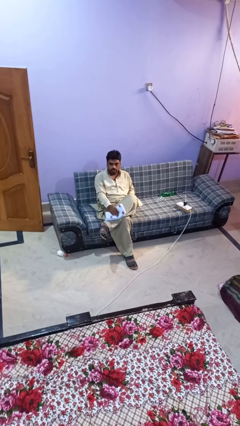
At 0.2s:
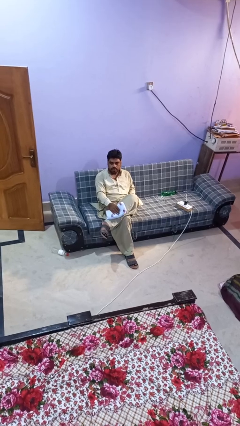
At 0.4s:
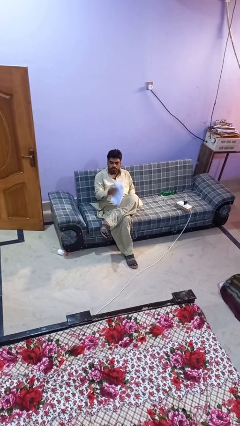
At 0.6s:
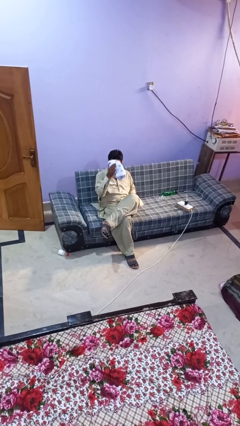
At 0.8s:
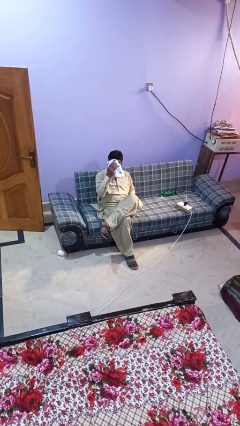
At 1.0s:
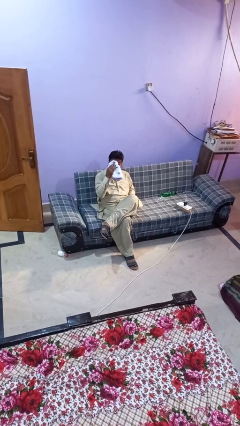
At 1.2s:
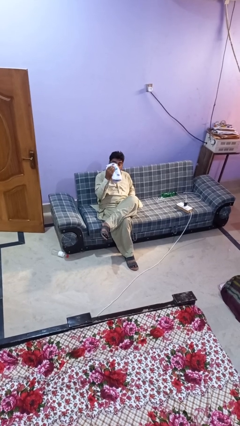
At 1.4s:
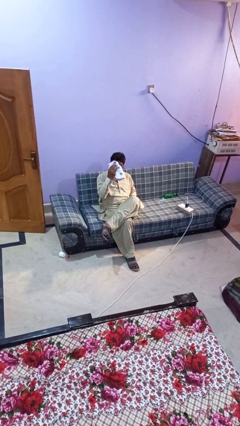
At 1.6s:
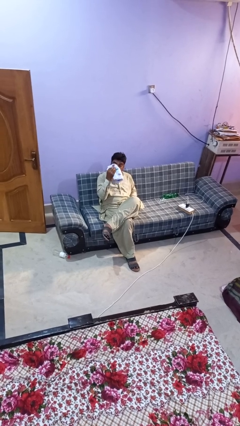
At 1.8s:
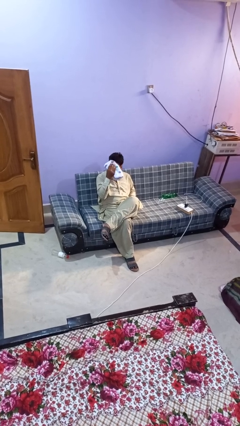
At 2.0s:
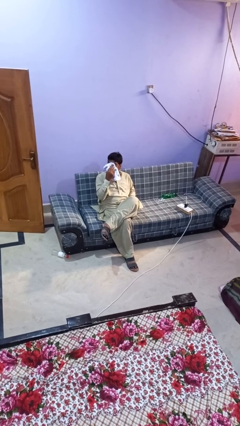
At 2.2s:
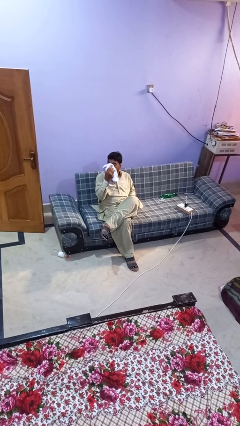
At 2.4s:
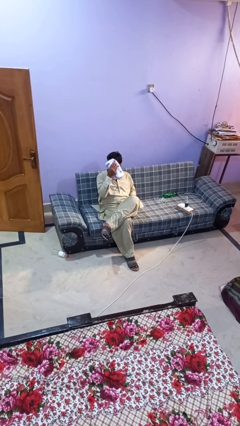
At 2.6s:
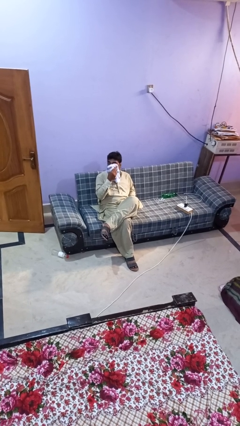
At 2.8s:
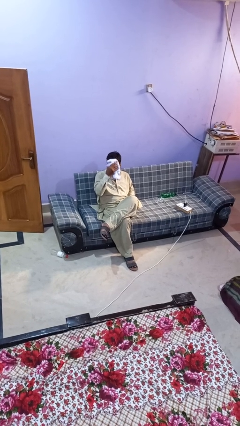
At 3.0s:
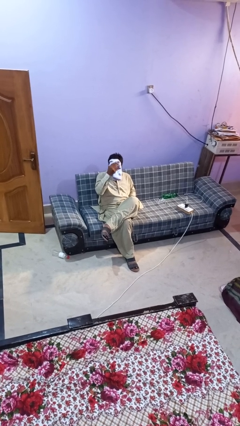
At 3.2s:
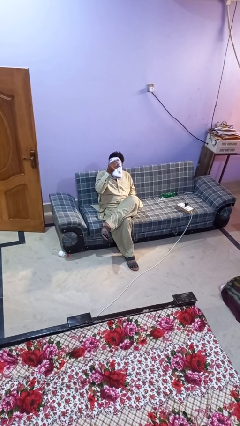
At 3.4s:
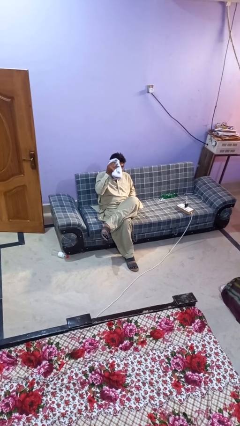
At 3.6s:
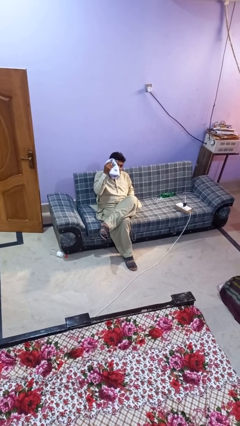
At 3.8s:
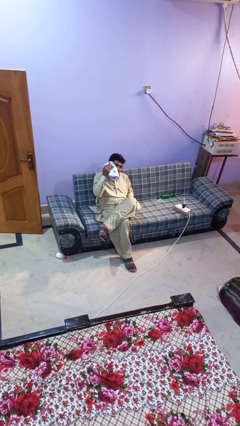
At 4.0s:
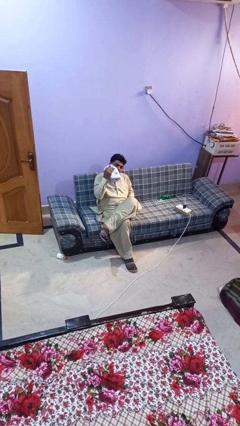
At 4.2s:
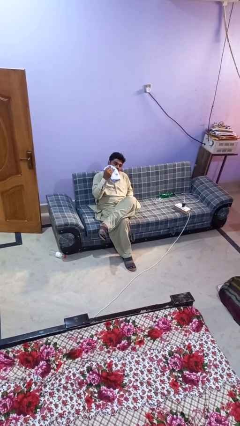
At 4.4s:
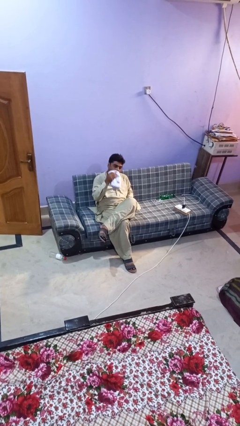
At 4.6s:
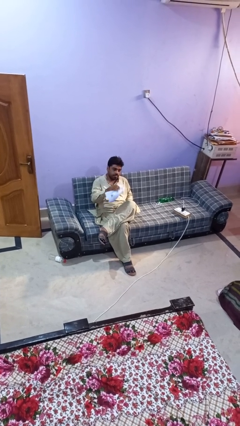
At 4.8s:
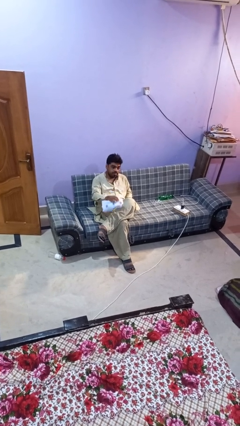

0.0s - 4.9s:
person wipes mouth with napkin

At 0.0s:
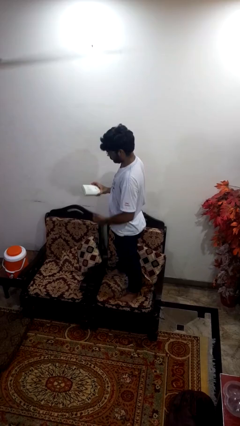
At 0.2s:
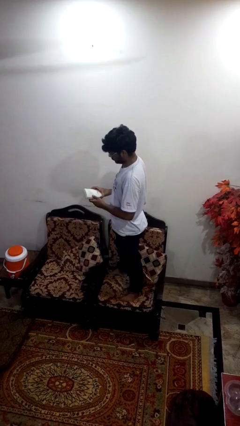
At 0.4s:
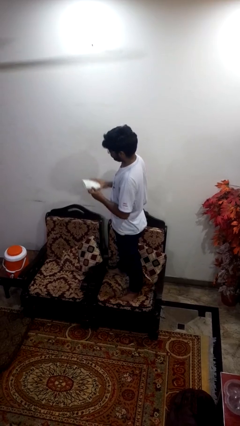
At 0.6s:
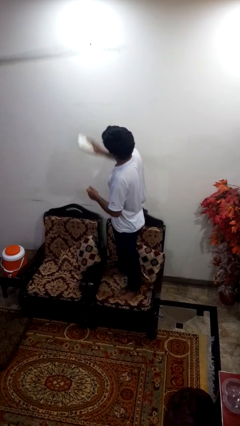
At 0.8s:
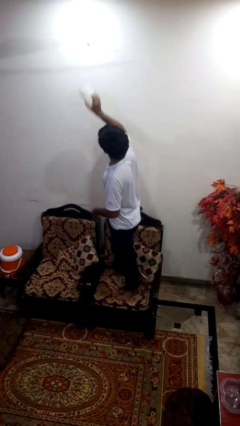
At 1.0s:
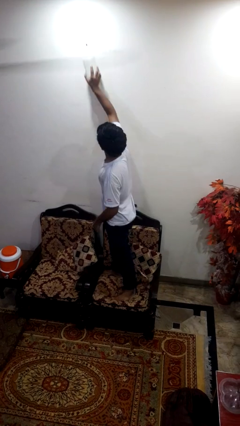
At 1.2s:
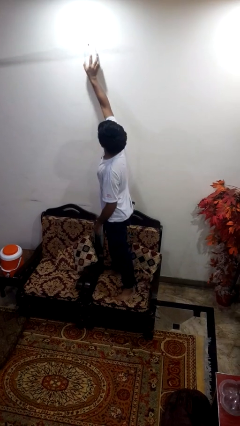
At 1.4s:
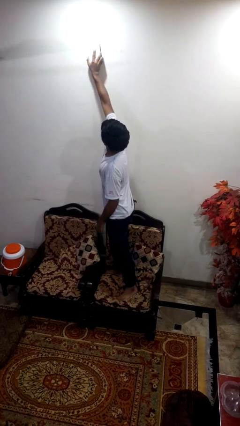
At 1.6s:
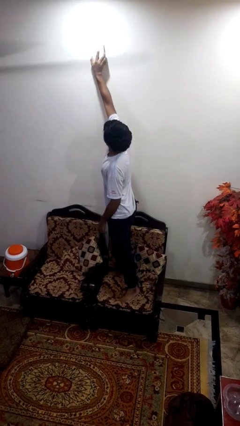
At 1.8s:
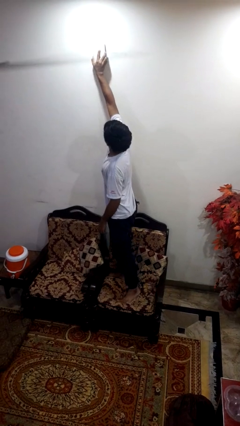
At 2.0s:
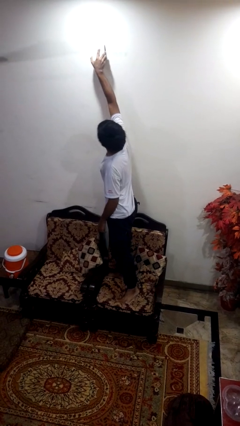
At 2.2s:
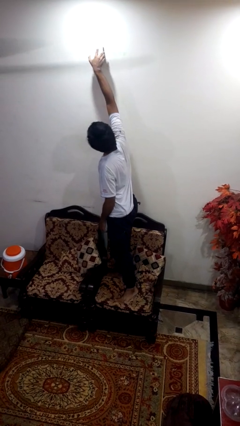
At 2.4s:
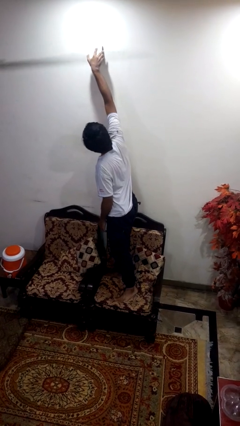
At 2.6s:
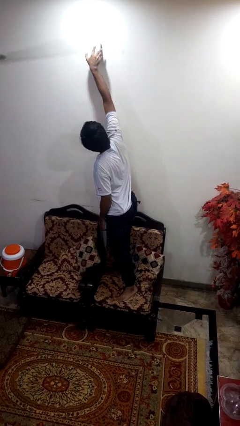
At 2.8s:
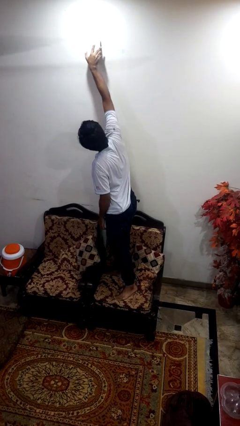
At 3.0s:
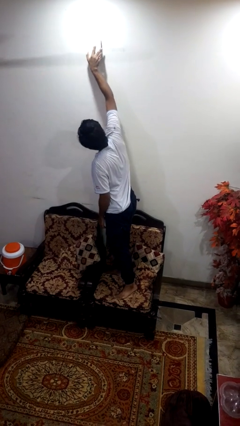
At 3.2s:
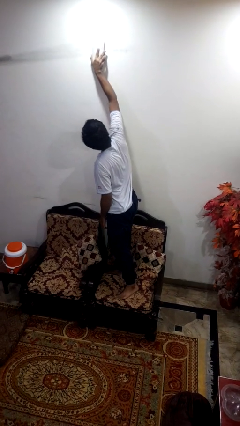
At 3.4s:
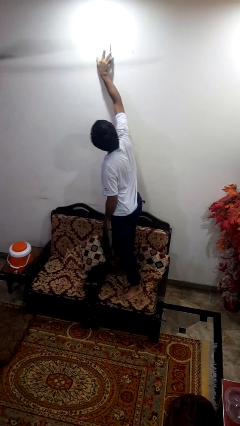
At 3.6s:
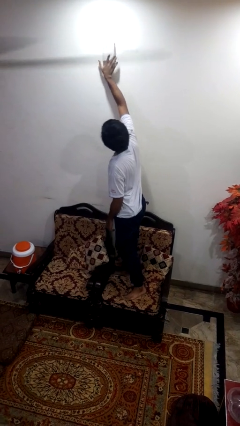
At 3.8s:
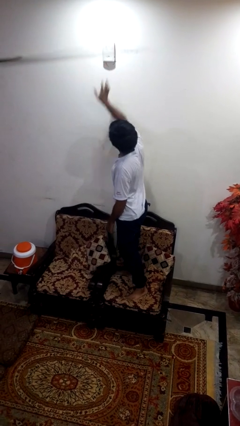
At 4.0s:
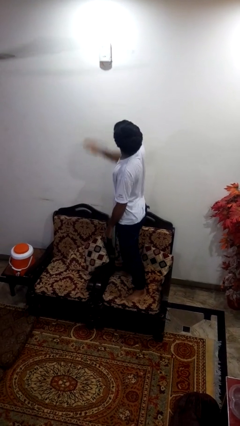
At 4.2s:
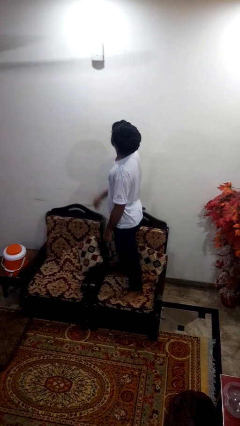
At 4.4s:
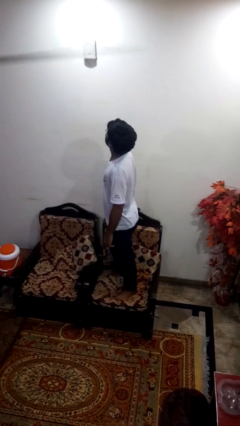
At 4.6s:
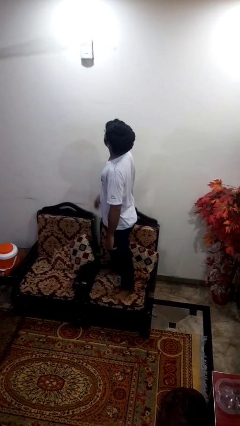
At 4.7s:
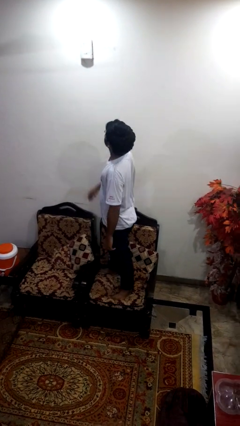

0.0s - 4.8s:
person puts up smoke detector

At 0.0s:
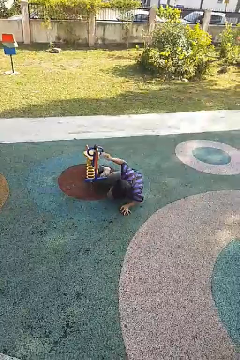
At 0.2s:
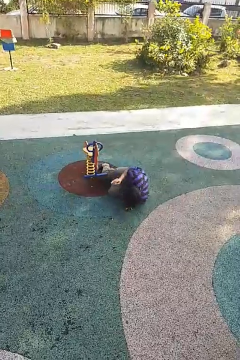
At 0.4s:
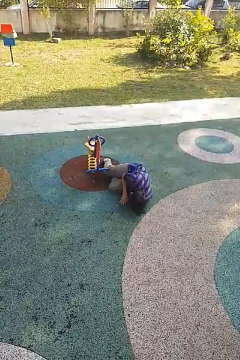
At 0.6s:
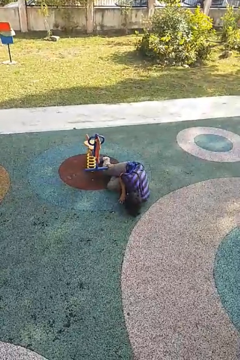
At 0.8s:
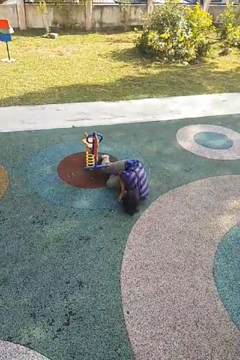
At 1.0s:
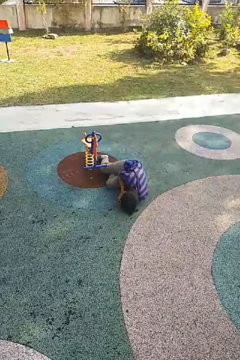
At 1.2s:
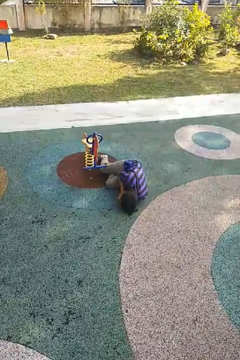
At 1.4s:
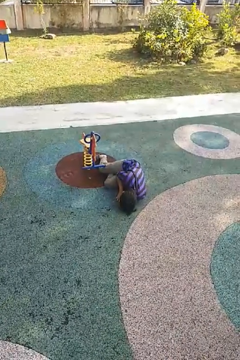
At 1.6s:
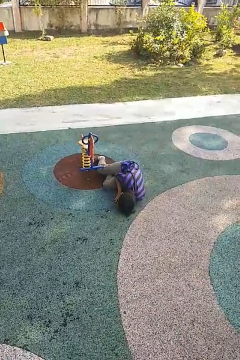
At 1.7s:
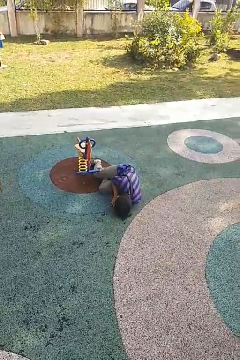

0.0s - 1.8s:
person lies down on floor

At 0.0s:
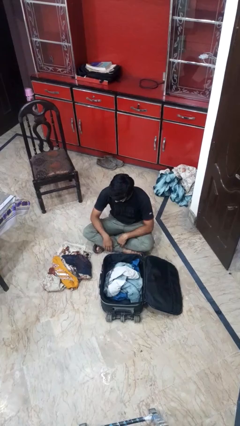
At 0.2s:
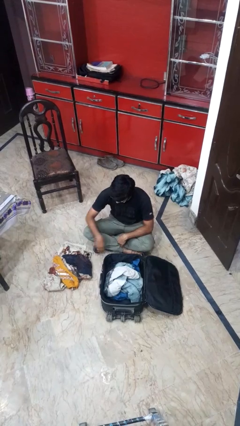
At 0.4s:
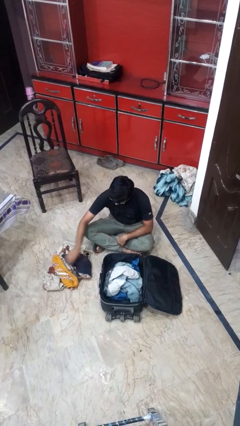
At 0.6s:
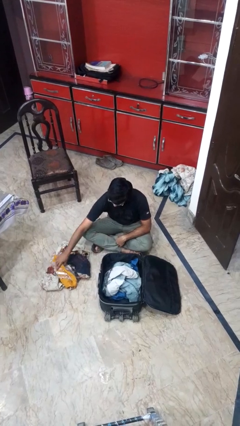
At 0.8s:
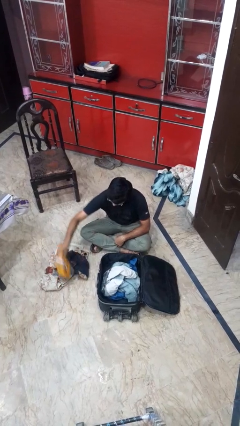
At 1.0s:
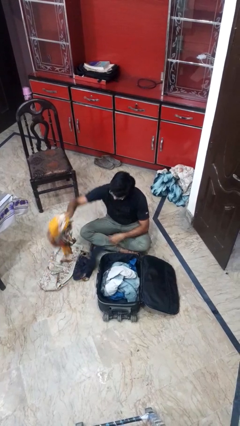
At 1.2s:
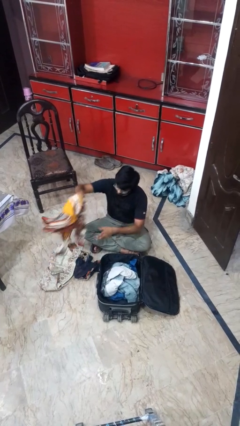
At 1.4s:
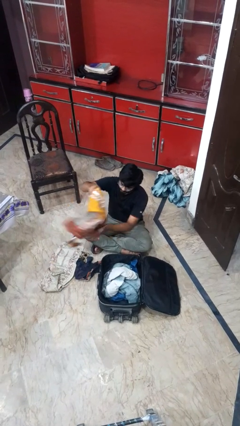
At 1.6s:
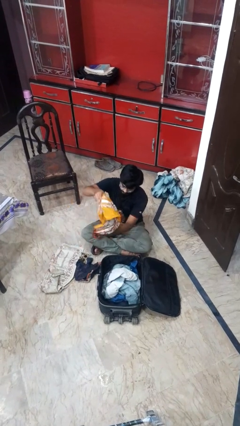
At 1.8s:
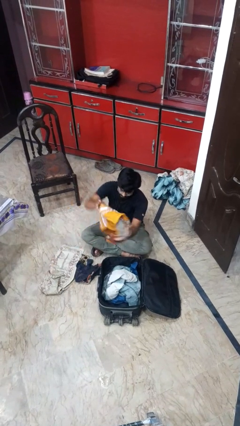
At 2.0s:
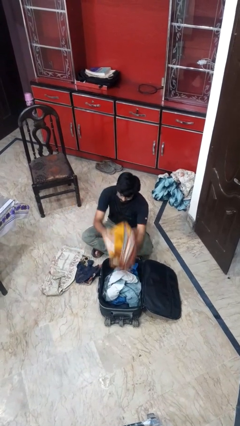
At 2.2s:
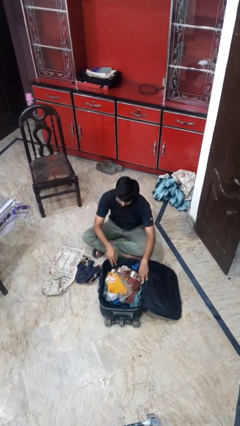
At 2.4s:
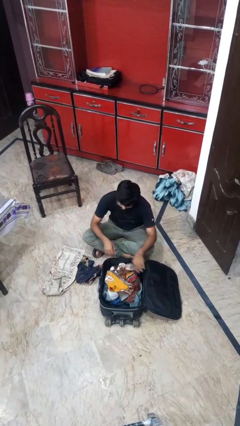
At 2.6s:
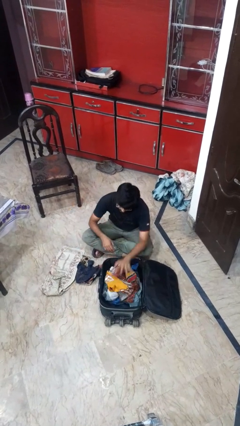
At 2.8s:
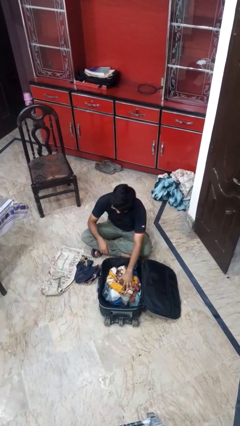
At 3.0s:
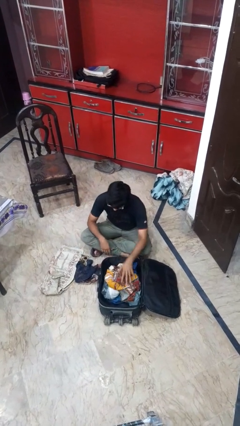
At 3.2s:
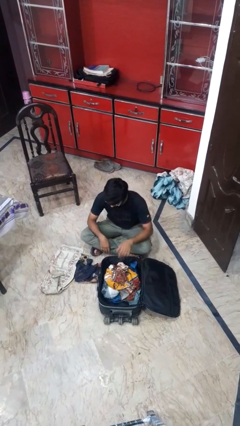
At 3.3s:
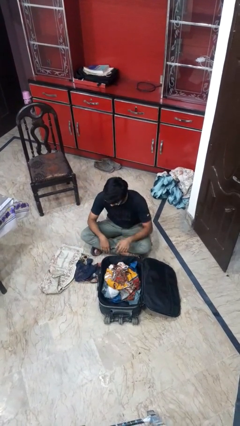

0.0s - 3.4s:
person loads clothes into suitcase

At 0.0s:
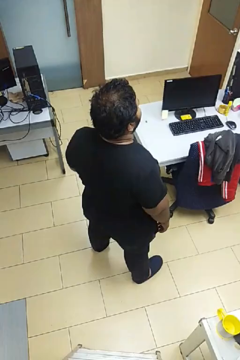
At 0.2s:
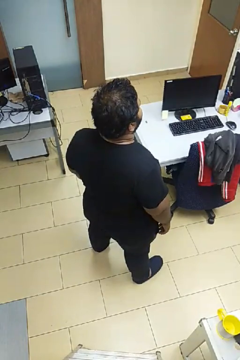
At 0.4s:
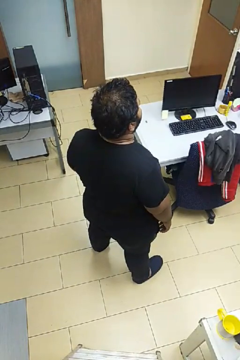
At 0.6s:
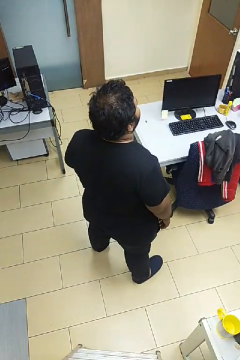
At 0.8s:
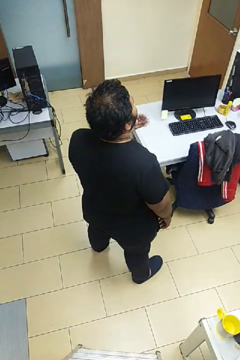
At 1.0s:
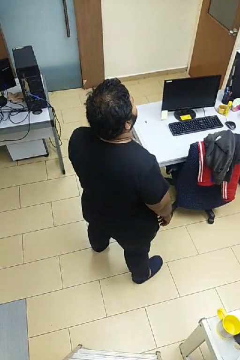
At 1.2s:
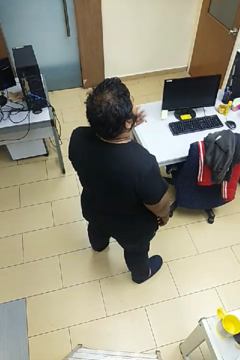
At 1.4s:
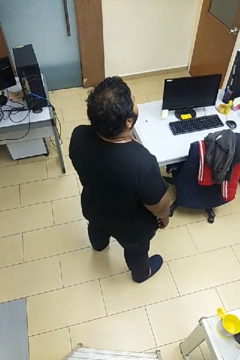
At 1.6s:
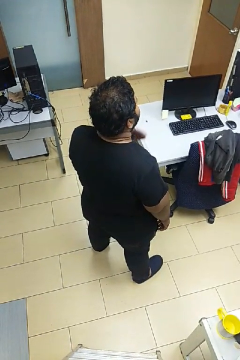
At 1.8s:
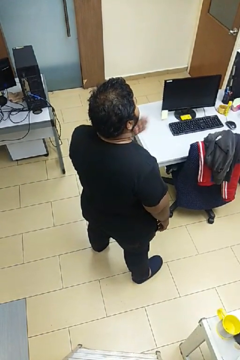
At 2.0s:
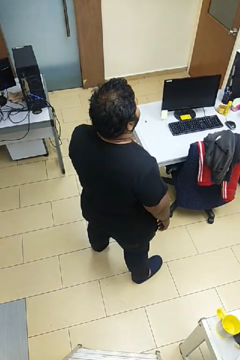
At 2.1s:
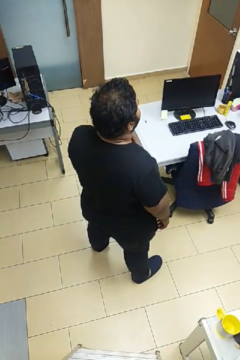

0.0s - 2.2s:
person drums on chest

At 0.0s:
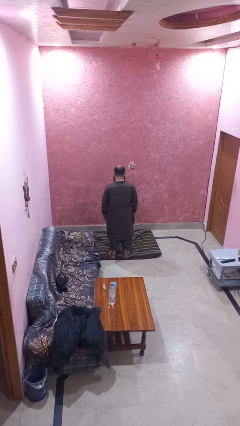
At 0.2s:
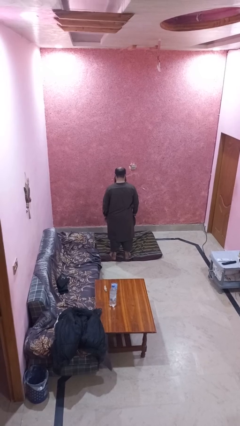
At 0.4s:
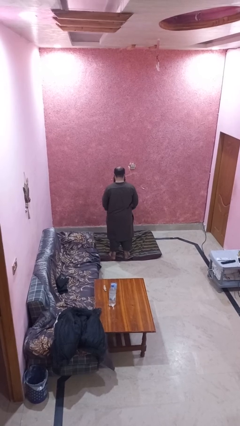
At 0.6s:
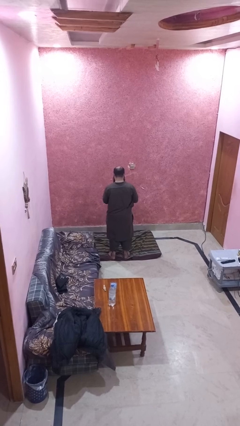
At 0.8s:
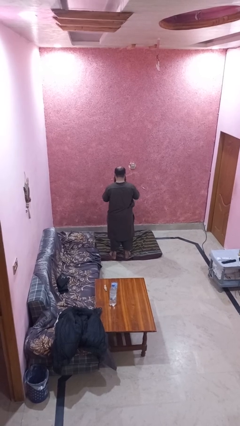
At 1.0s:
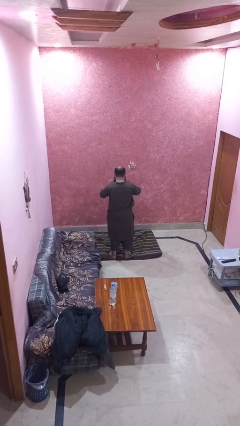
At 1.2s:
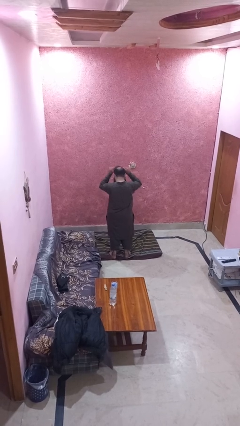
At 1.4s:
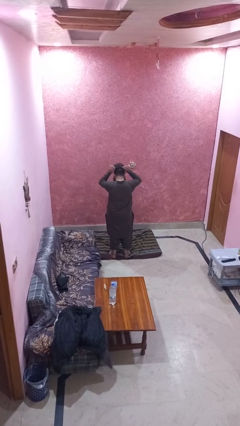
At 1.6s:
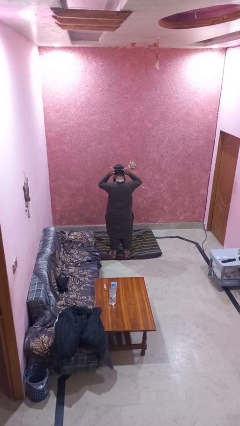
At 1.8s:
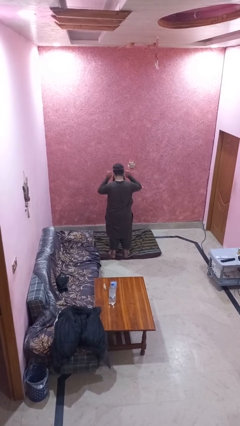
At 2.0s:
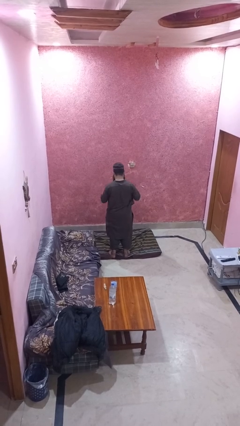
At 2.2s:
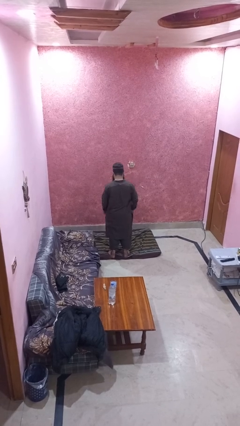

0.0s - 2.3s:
person puts on hat
